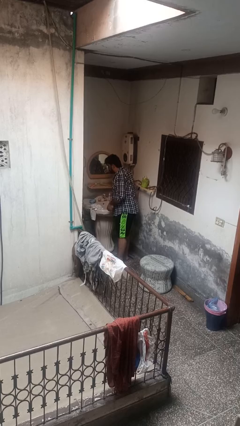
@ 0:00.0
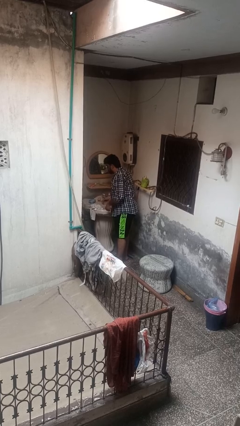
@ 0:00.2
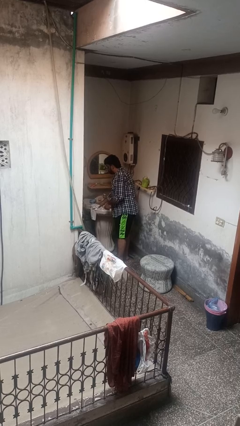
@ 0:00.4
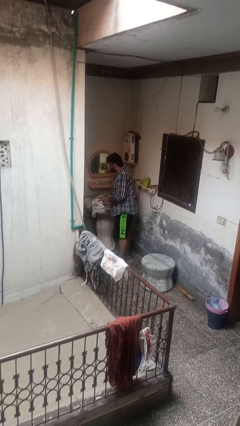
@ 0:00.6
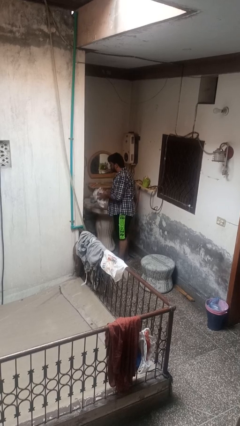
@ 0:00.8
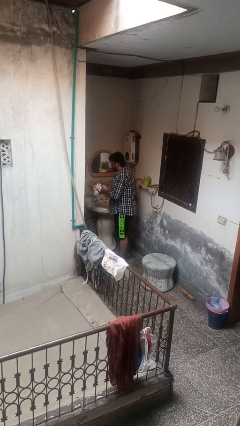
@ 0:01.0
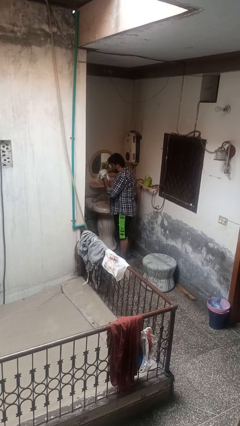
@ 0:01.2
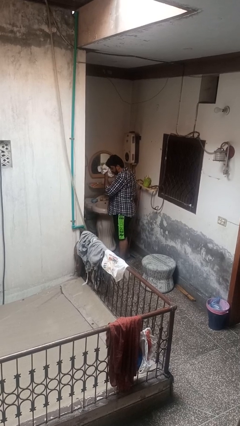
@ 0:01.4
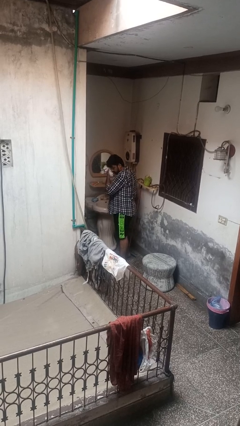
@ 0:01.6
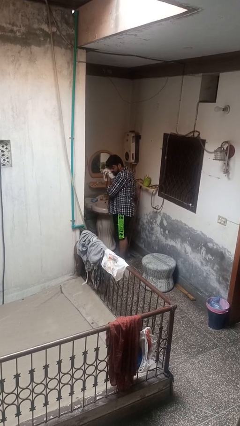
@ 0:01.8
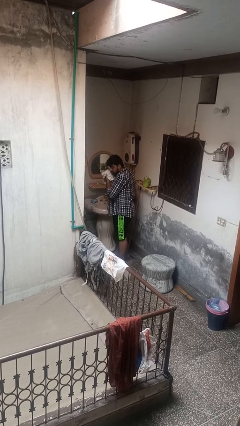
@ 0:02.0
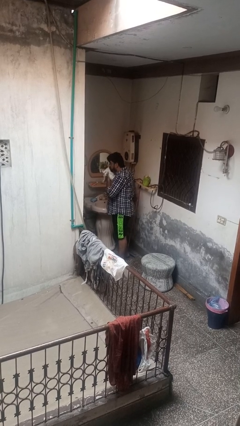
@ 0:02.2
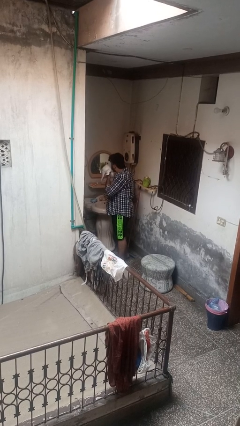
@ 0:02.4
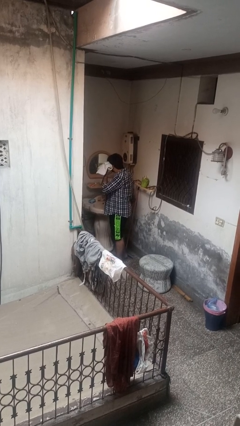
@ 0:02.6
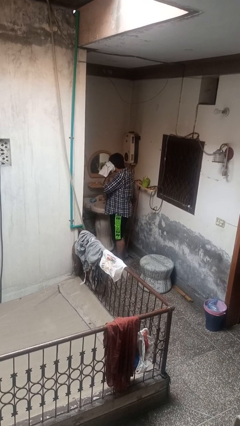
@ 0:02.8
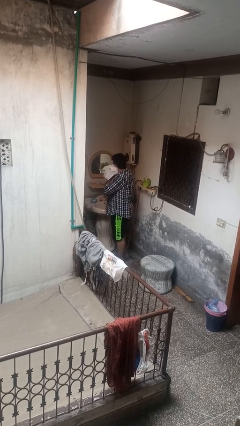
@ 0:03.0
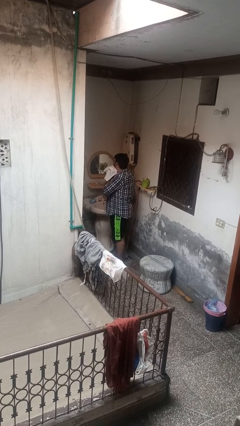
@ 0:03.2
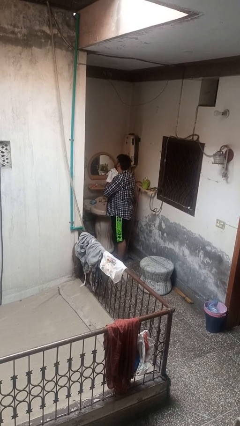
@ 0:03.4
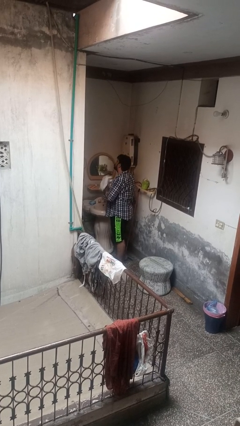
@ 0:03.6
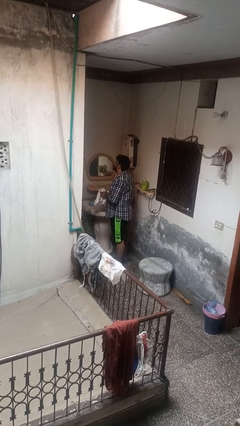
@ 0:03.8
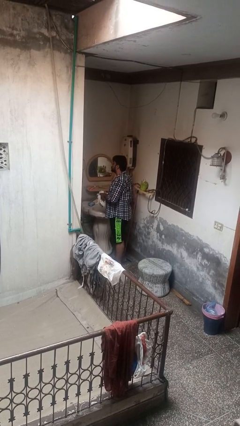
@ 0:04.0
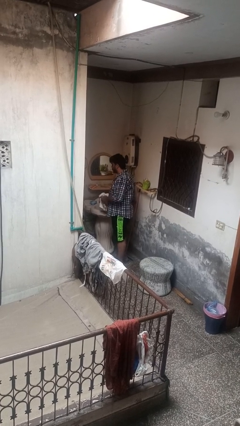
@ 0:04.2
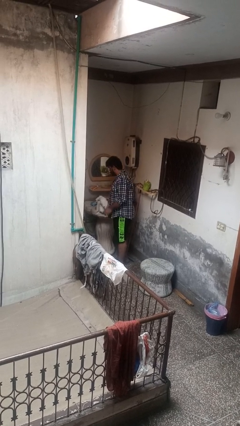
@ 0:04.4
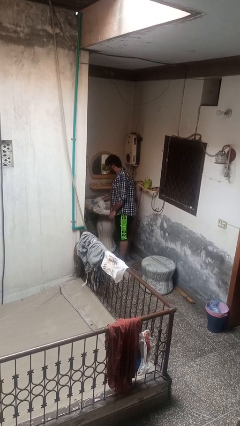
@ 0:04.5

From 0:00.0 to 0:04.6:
person dries face with towel

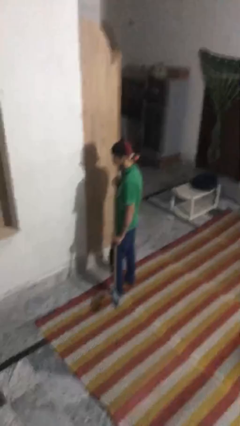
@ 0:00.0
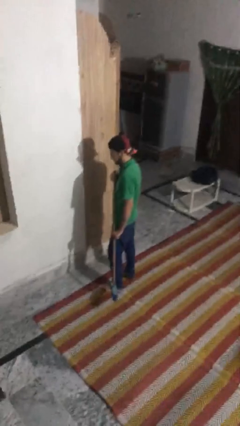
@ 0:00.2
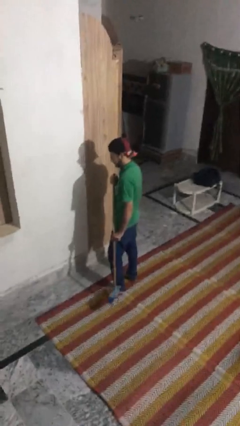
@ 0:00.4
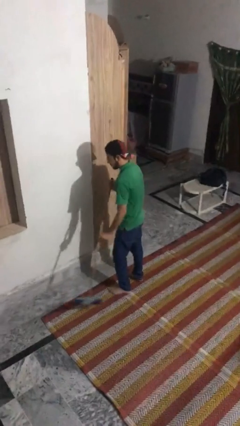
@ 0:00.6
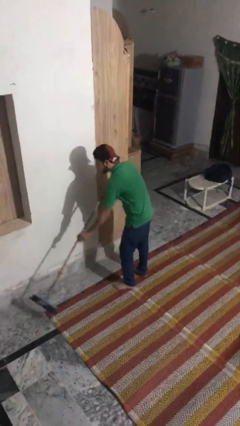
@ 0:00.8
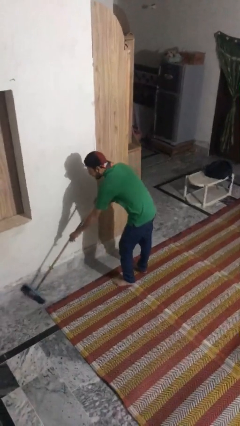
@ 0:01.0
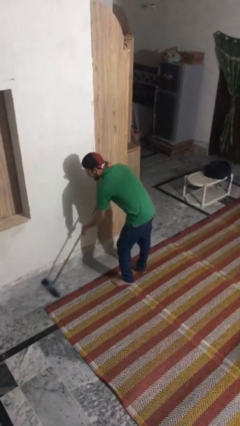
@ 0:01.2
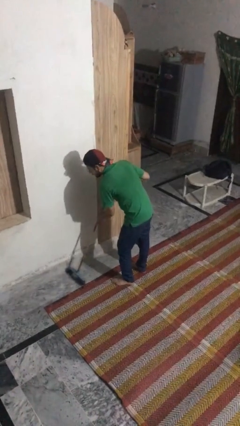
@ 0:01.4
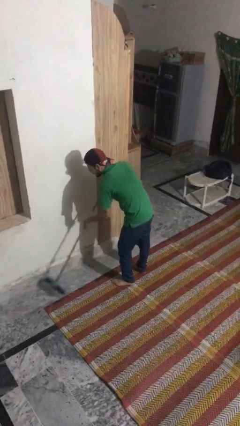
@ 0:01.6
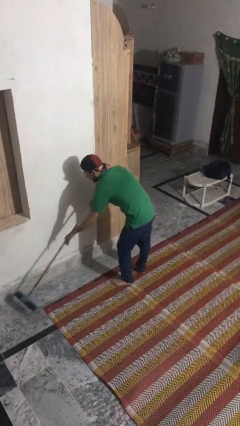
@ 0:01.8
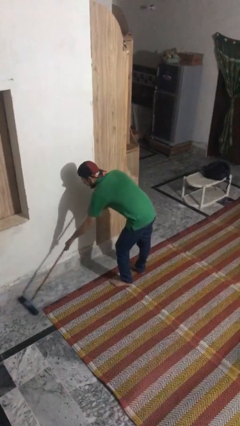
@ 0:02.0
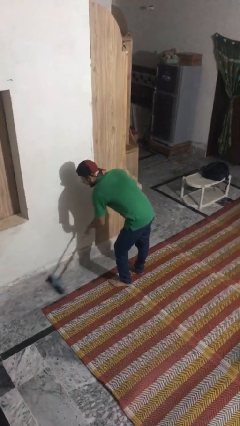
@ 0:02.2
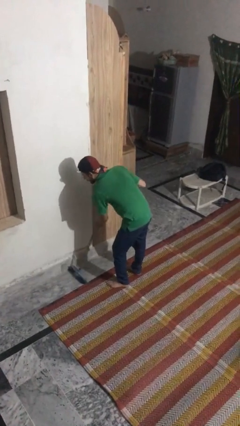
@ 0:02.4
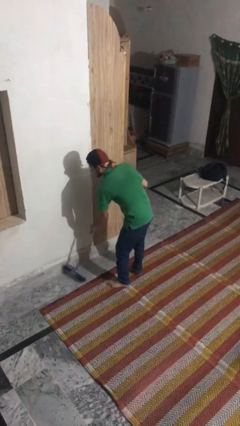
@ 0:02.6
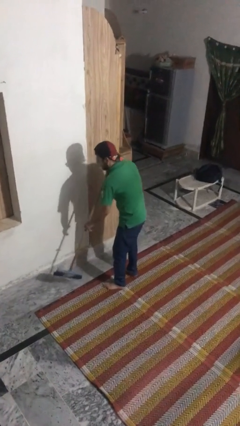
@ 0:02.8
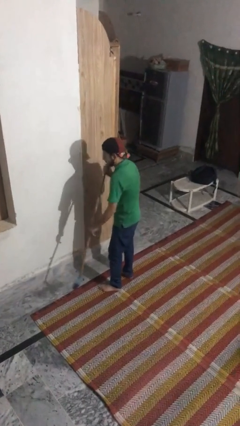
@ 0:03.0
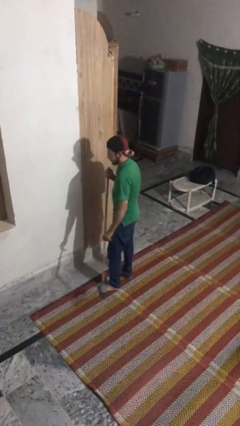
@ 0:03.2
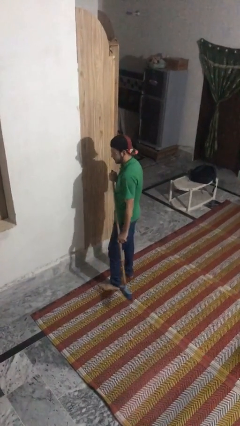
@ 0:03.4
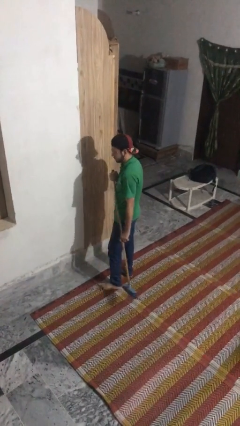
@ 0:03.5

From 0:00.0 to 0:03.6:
person sweeps floor

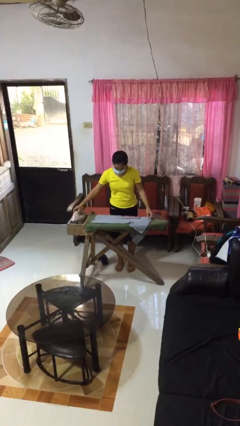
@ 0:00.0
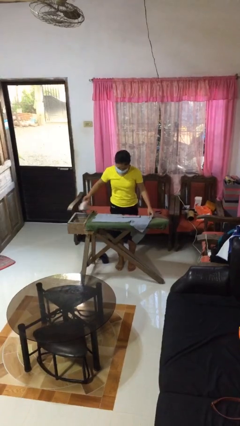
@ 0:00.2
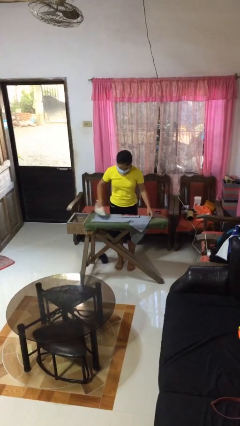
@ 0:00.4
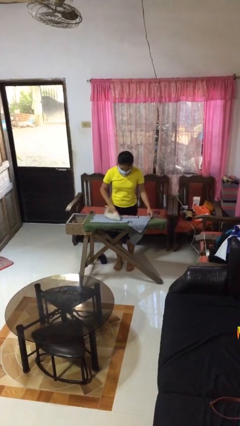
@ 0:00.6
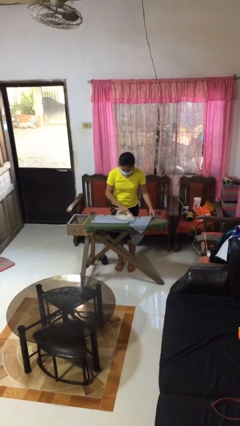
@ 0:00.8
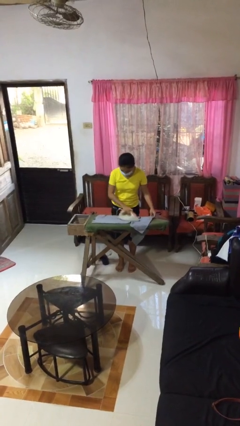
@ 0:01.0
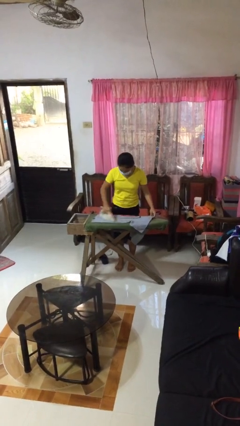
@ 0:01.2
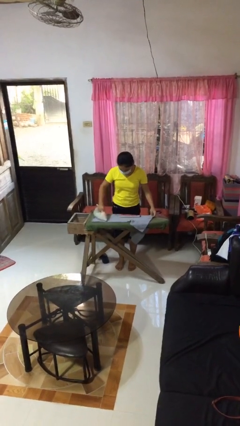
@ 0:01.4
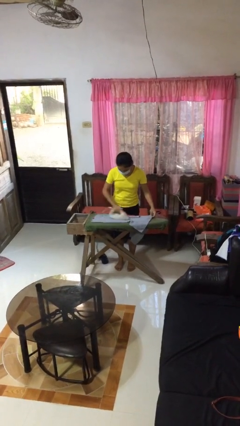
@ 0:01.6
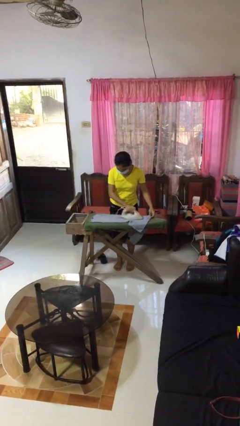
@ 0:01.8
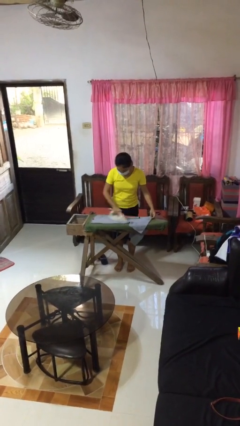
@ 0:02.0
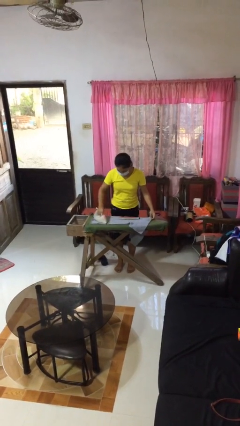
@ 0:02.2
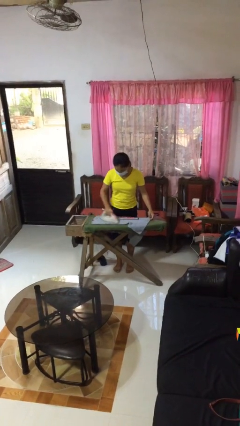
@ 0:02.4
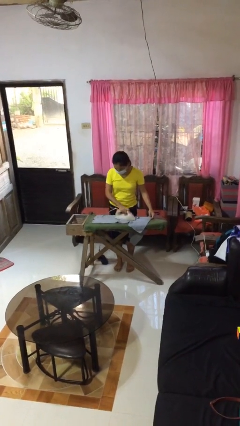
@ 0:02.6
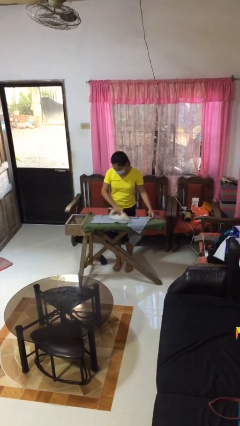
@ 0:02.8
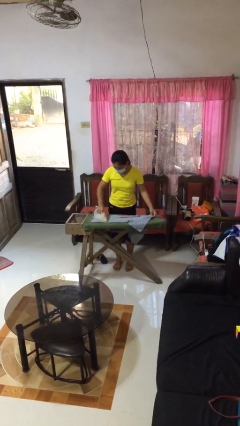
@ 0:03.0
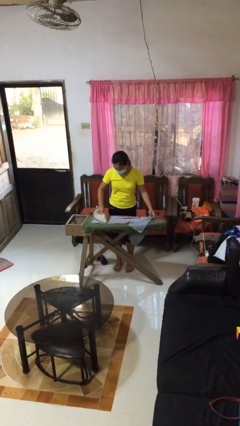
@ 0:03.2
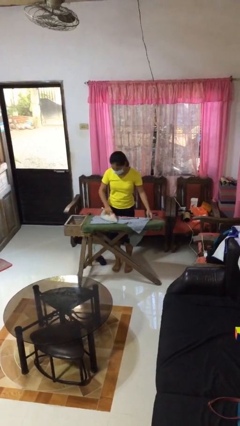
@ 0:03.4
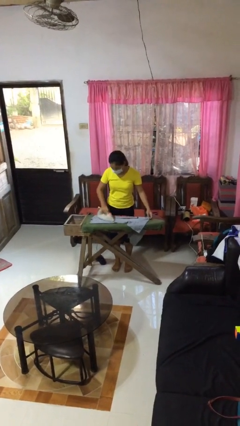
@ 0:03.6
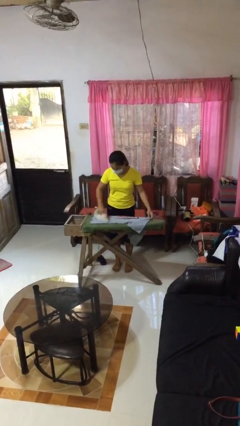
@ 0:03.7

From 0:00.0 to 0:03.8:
person irons clothes

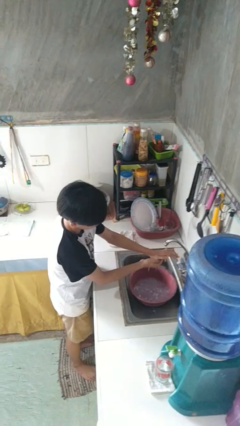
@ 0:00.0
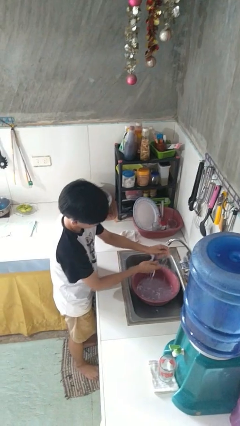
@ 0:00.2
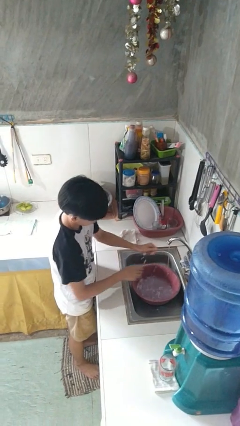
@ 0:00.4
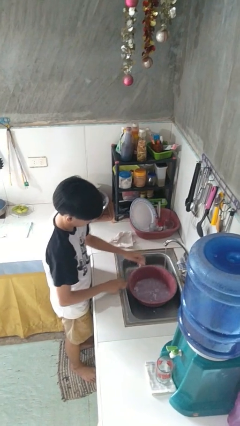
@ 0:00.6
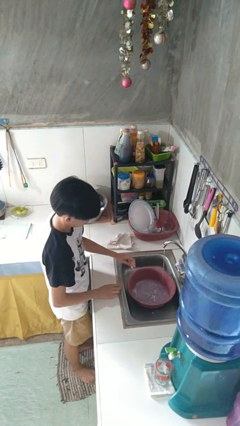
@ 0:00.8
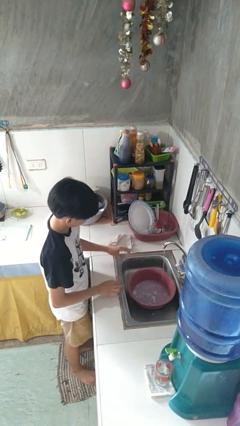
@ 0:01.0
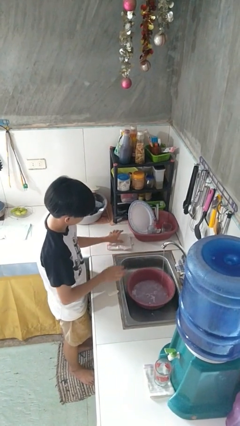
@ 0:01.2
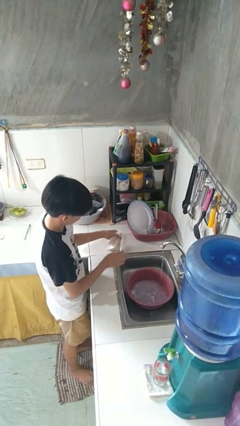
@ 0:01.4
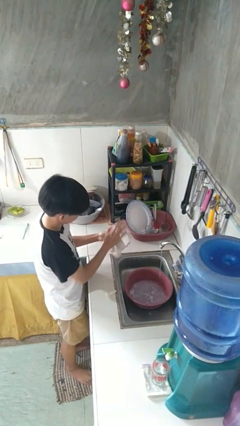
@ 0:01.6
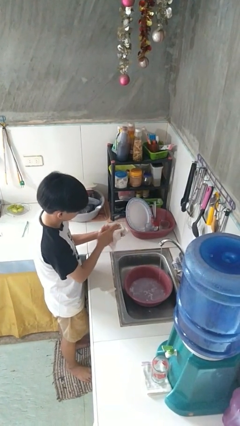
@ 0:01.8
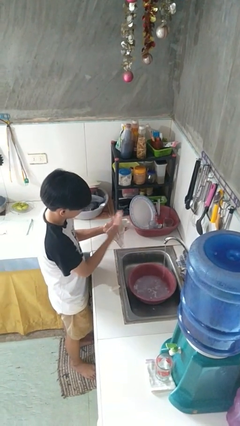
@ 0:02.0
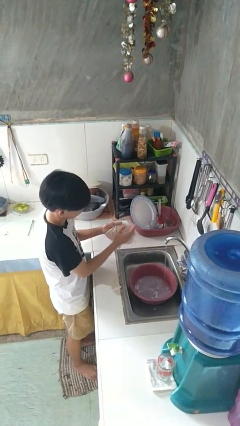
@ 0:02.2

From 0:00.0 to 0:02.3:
person dries hands with towel

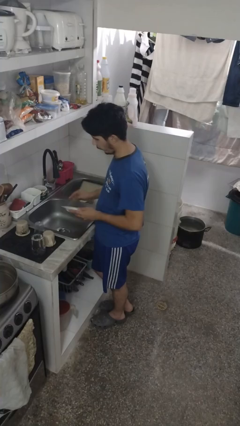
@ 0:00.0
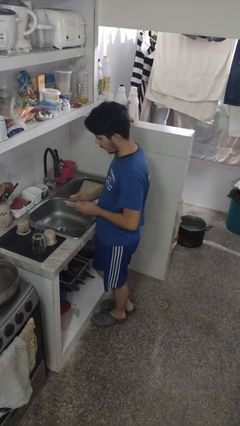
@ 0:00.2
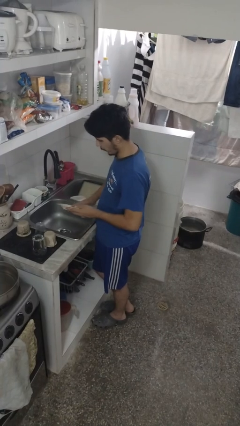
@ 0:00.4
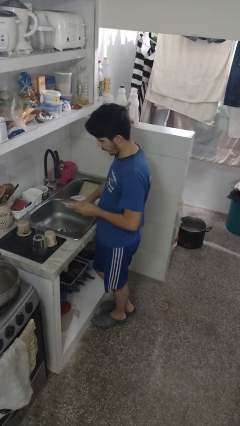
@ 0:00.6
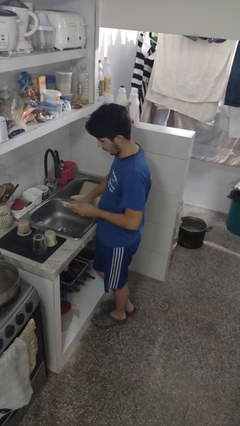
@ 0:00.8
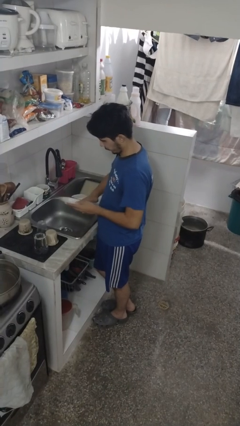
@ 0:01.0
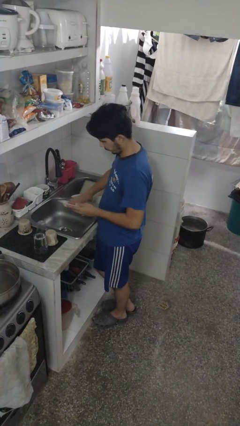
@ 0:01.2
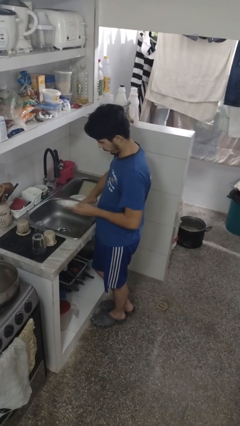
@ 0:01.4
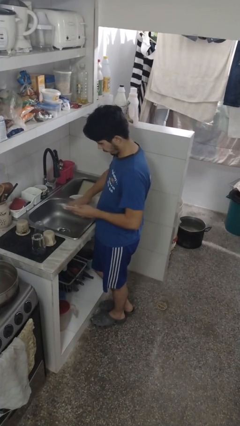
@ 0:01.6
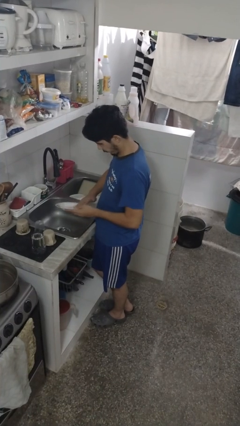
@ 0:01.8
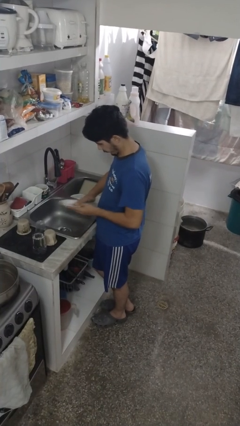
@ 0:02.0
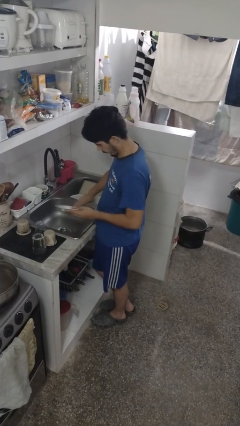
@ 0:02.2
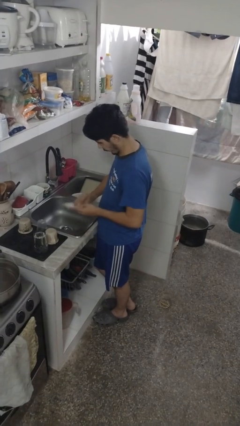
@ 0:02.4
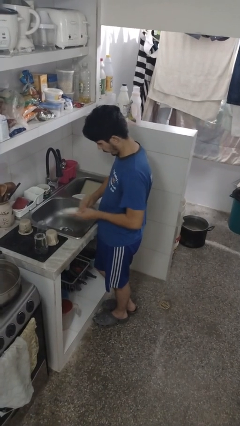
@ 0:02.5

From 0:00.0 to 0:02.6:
person washes dish

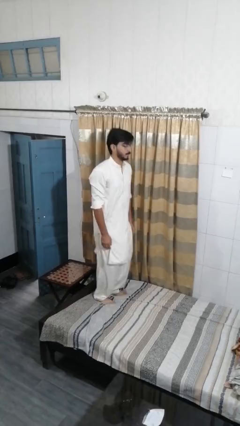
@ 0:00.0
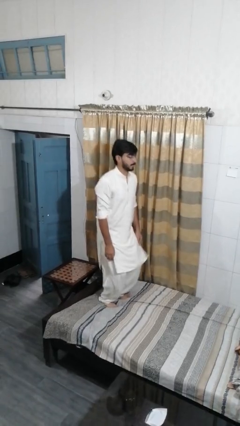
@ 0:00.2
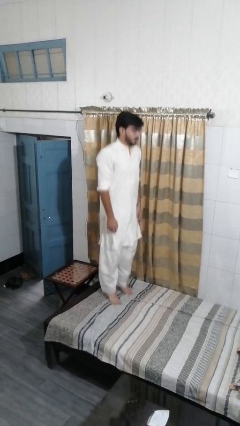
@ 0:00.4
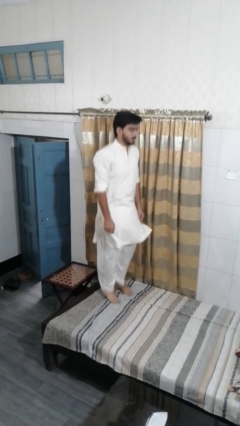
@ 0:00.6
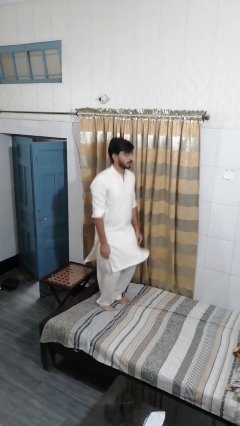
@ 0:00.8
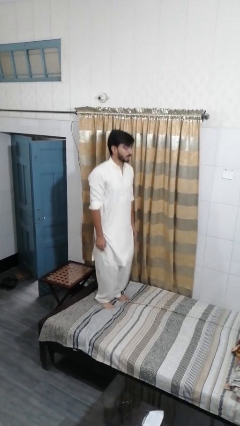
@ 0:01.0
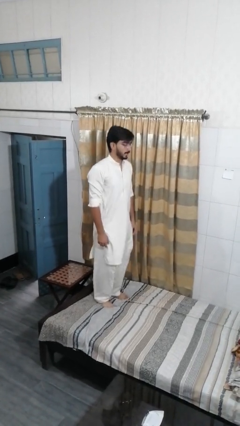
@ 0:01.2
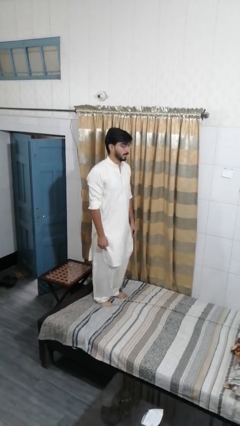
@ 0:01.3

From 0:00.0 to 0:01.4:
person jumps on bed
